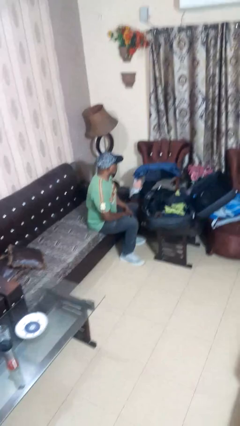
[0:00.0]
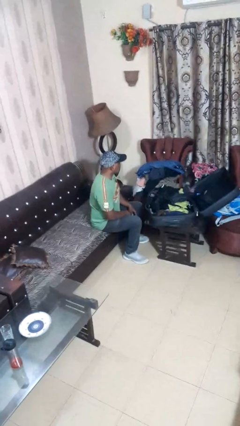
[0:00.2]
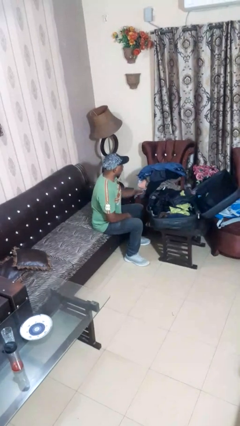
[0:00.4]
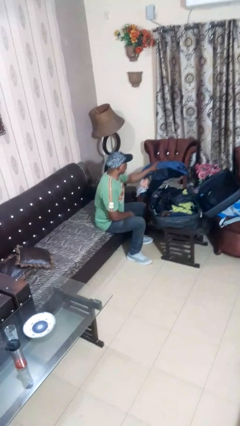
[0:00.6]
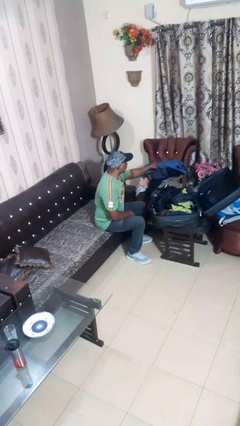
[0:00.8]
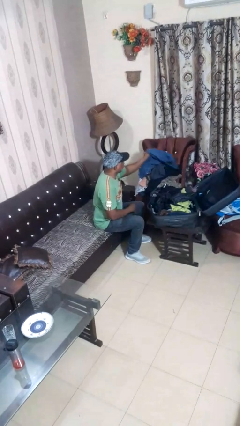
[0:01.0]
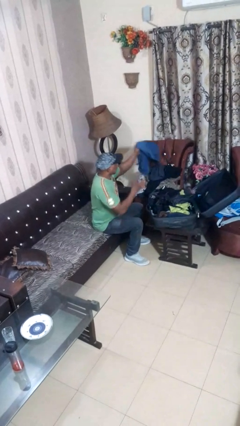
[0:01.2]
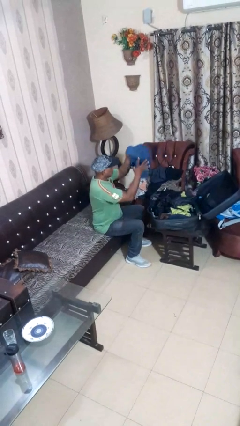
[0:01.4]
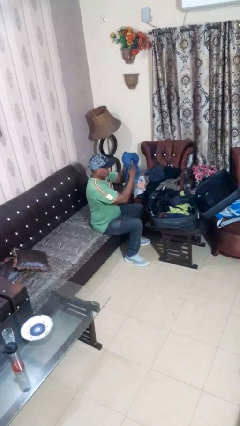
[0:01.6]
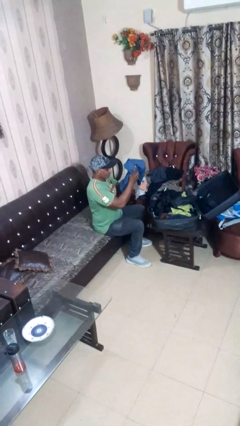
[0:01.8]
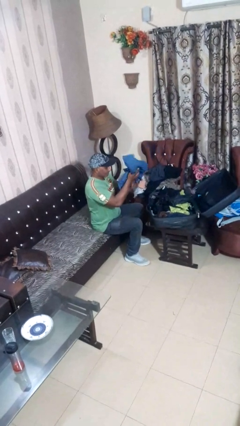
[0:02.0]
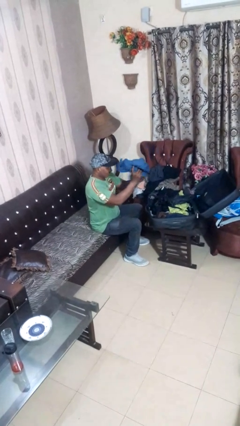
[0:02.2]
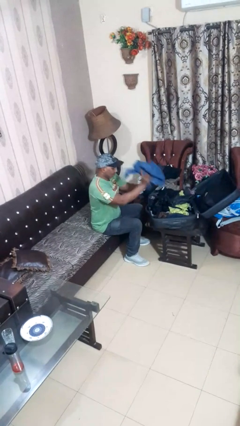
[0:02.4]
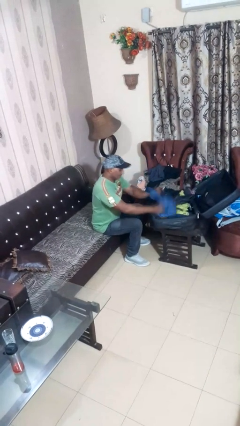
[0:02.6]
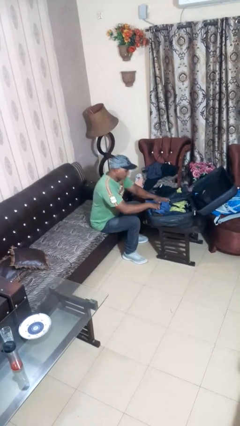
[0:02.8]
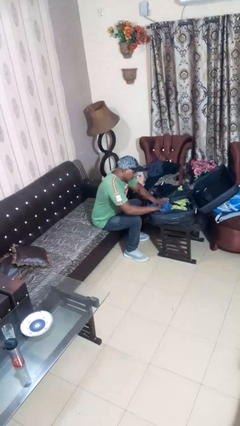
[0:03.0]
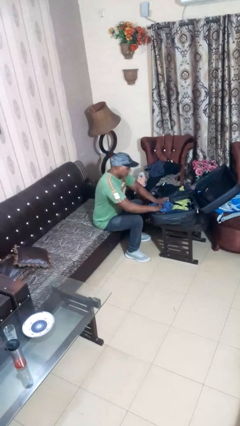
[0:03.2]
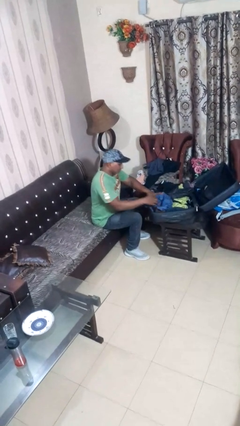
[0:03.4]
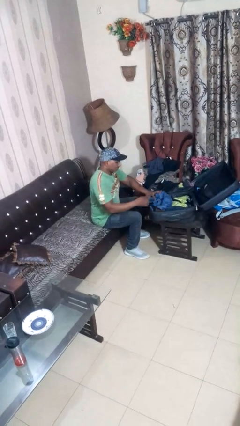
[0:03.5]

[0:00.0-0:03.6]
person loads clothes into suitcase

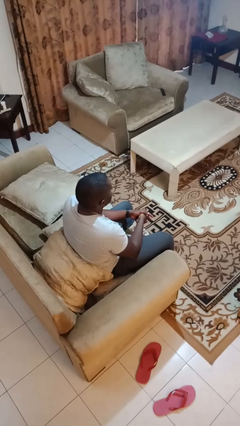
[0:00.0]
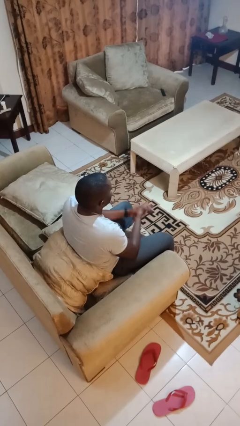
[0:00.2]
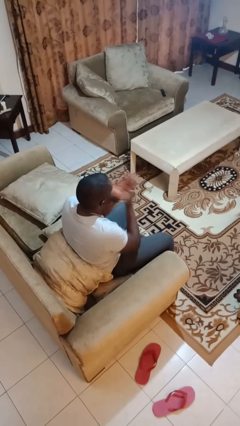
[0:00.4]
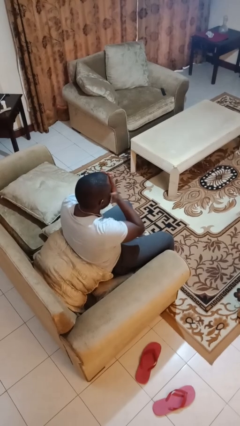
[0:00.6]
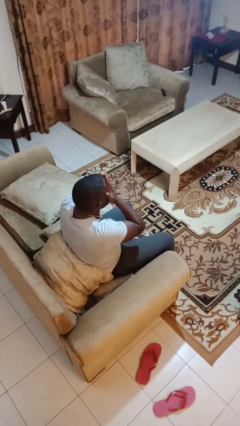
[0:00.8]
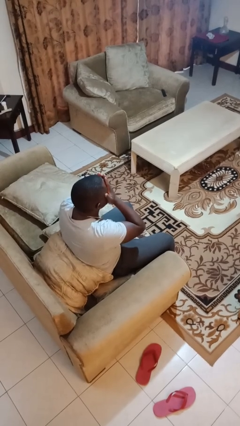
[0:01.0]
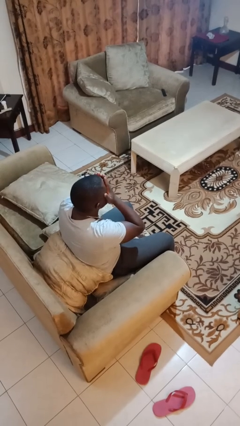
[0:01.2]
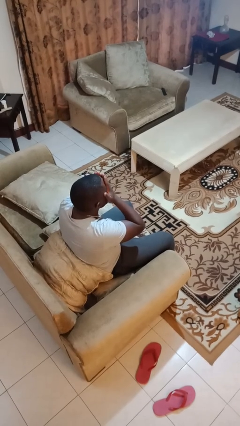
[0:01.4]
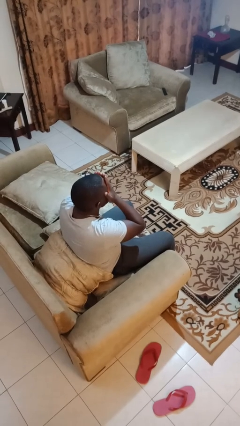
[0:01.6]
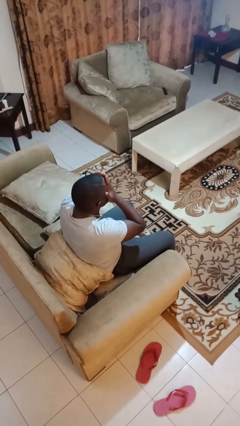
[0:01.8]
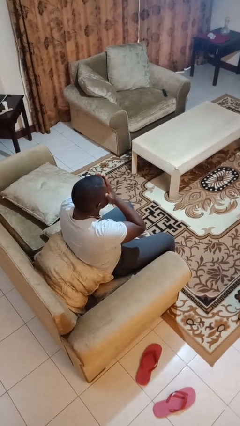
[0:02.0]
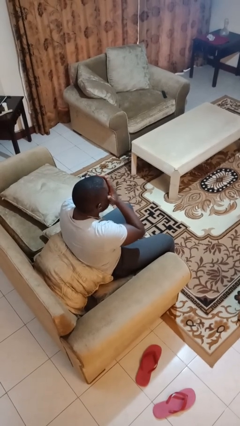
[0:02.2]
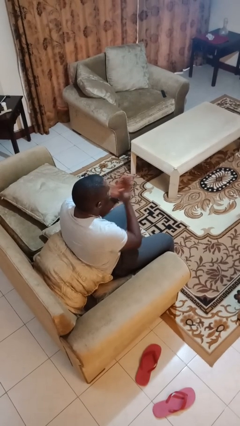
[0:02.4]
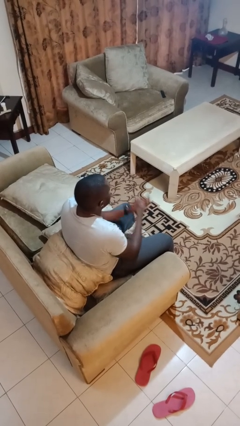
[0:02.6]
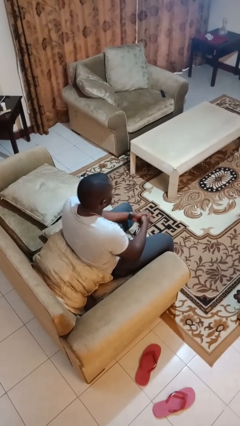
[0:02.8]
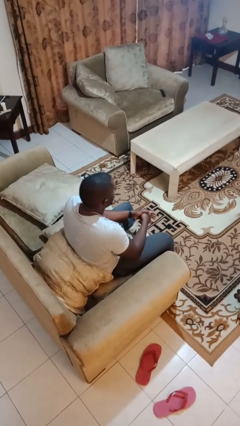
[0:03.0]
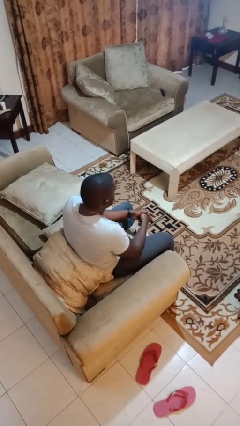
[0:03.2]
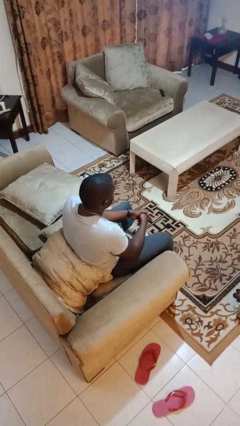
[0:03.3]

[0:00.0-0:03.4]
person covers face with hands

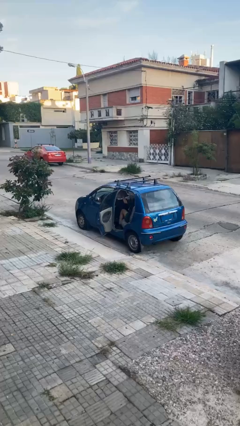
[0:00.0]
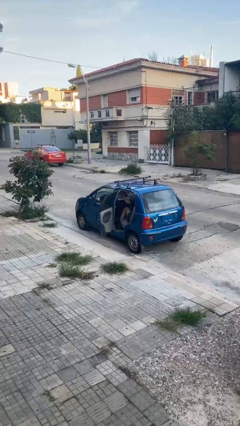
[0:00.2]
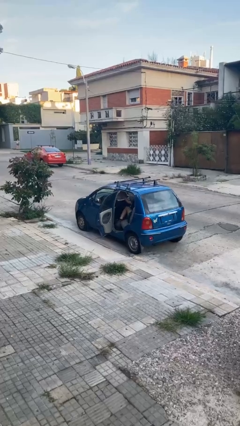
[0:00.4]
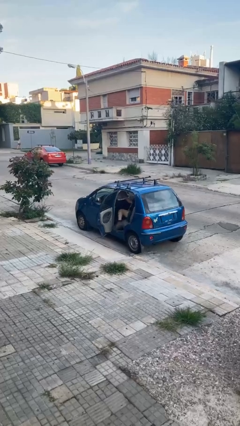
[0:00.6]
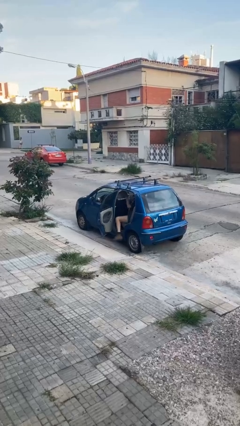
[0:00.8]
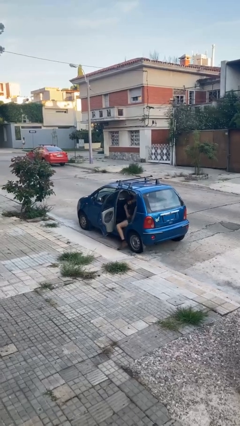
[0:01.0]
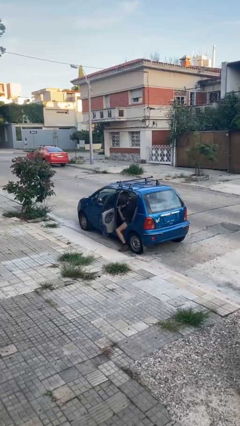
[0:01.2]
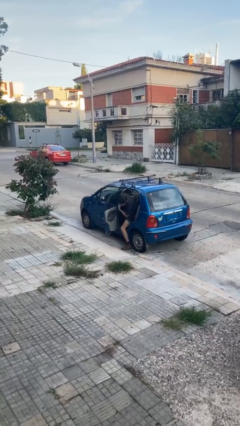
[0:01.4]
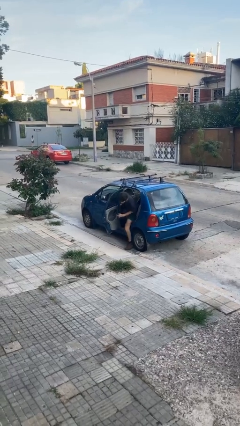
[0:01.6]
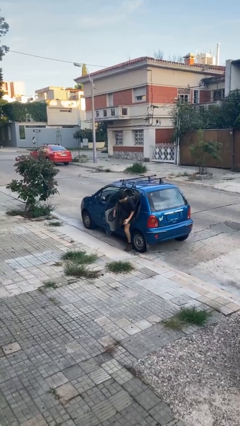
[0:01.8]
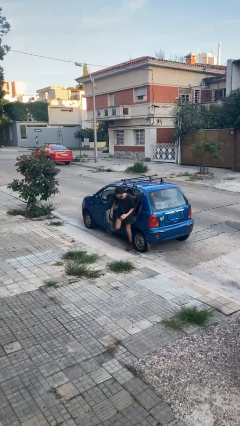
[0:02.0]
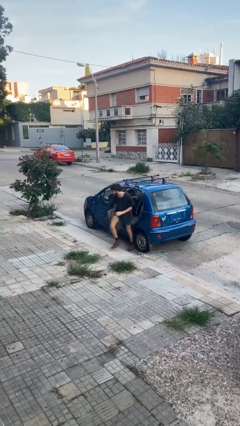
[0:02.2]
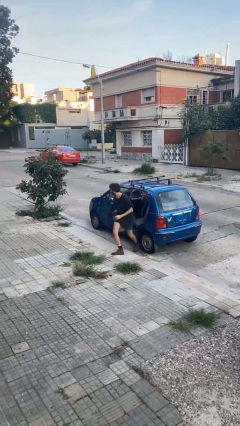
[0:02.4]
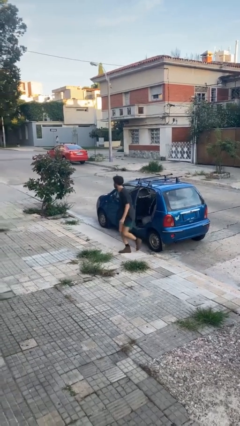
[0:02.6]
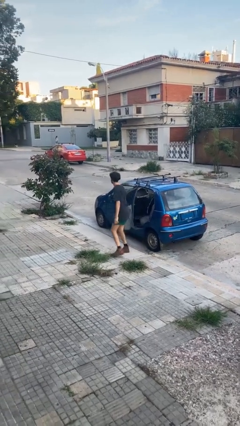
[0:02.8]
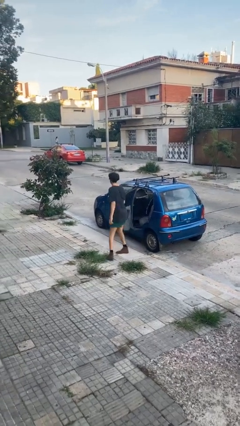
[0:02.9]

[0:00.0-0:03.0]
person exits car

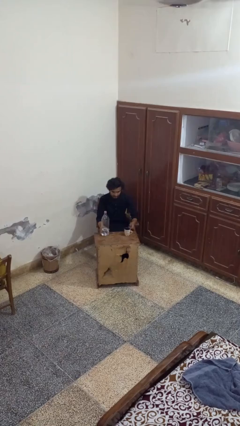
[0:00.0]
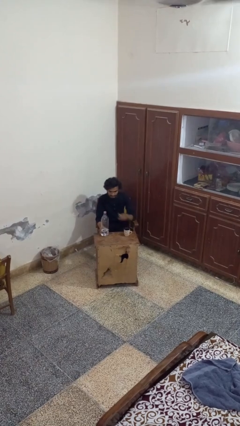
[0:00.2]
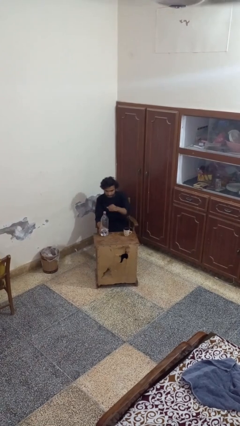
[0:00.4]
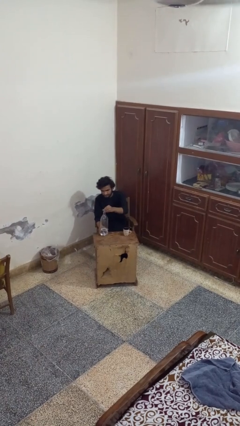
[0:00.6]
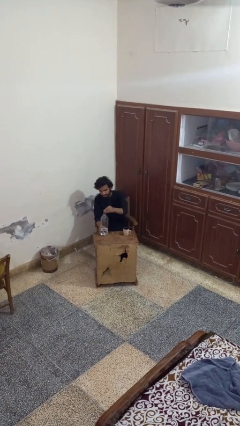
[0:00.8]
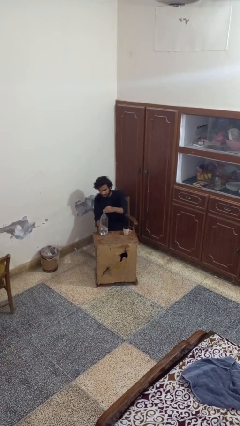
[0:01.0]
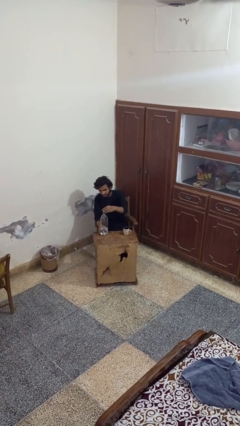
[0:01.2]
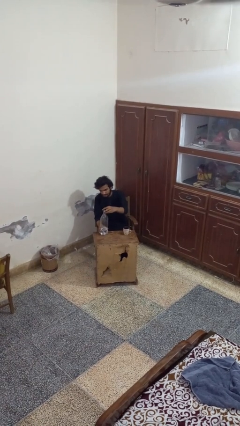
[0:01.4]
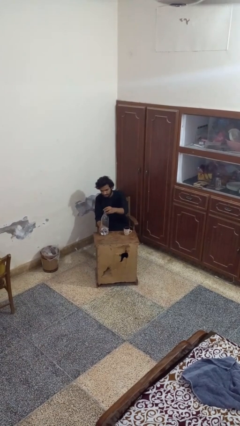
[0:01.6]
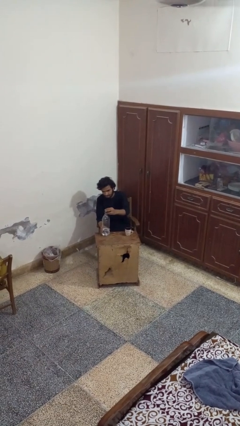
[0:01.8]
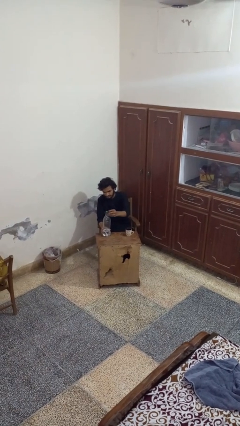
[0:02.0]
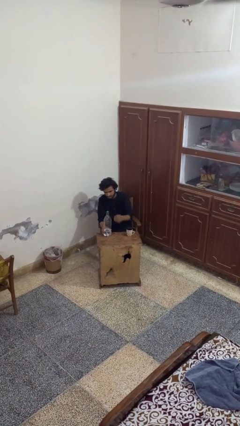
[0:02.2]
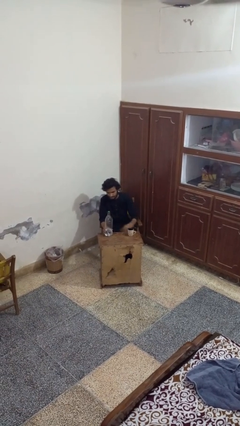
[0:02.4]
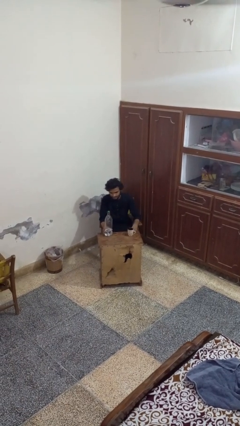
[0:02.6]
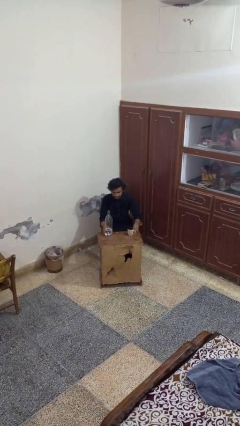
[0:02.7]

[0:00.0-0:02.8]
person screws lid to bottle

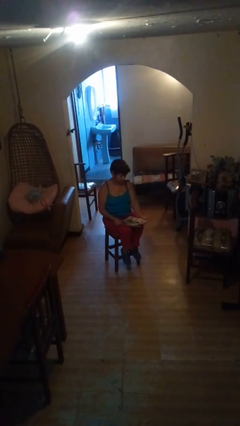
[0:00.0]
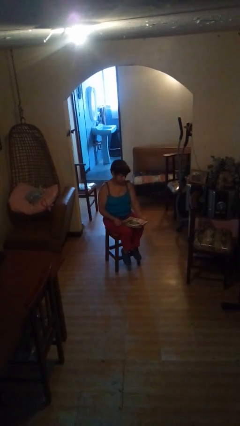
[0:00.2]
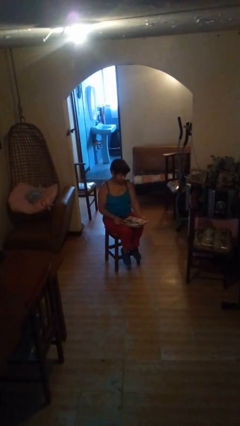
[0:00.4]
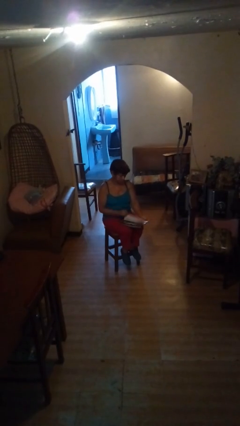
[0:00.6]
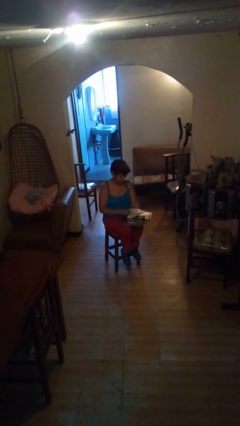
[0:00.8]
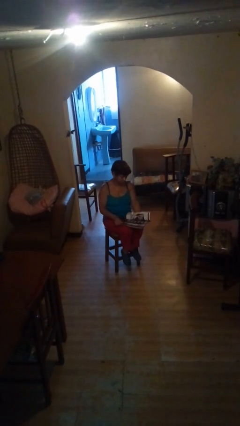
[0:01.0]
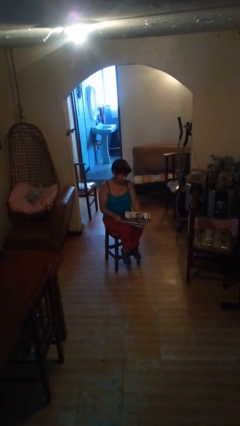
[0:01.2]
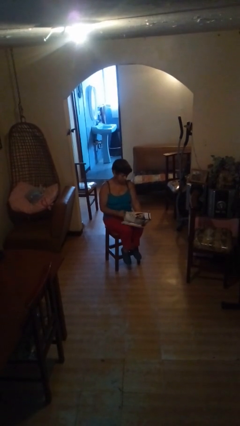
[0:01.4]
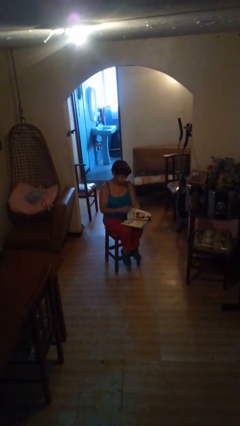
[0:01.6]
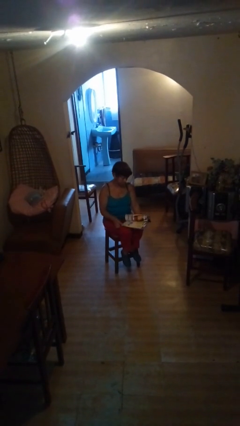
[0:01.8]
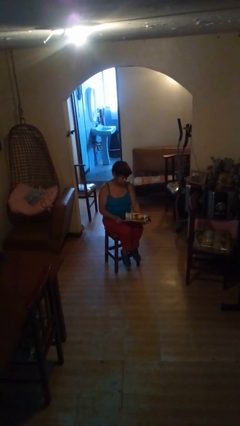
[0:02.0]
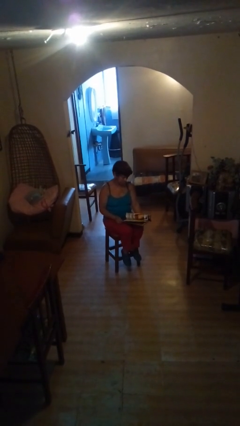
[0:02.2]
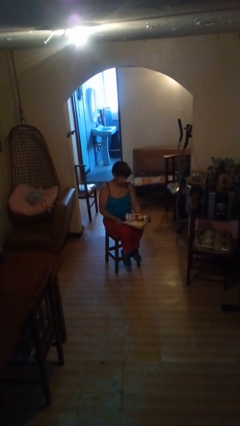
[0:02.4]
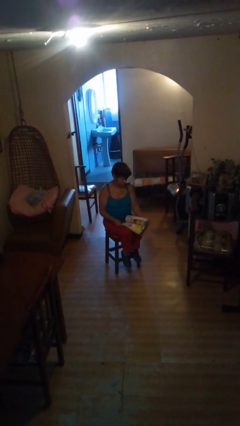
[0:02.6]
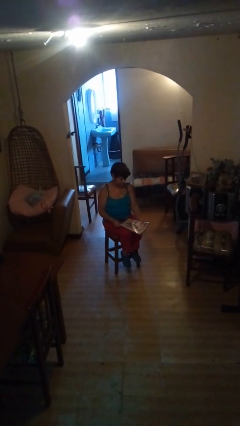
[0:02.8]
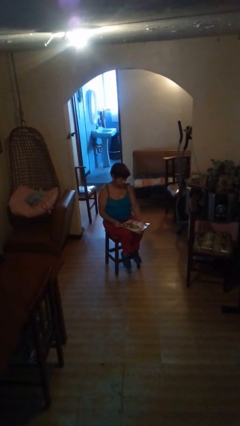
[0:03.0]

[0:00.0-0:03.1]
person reads magazine

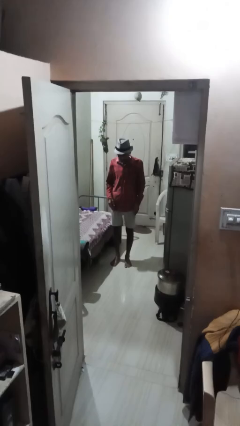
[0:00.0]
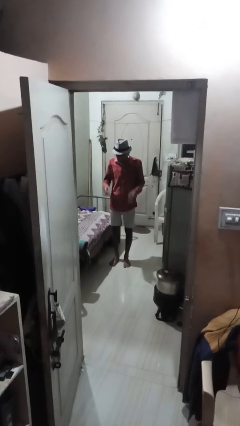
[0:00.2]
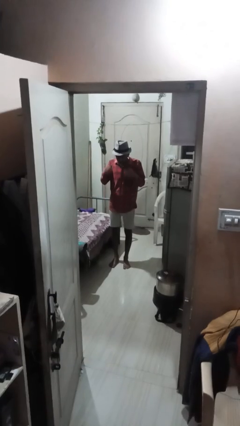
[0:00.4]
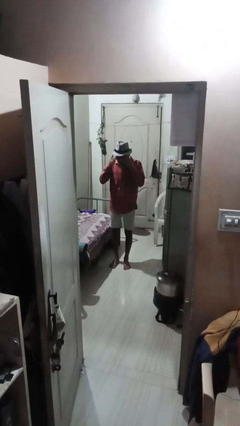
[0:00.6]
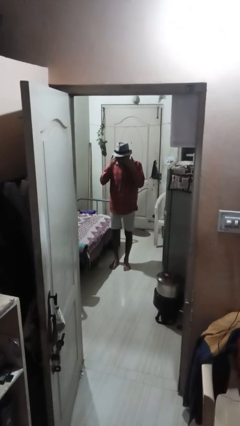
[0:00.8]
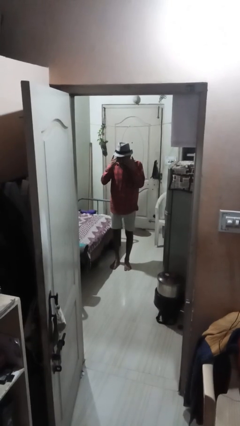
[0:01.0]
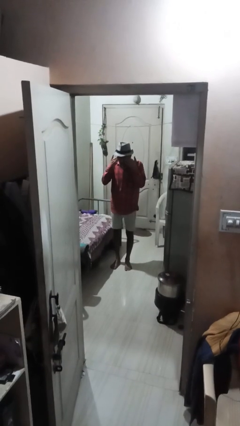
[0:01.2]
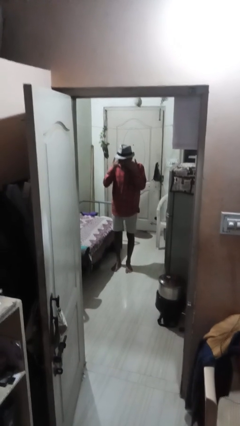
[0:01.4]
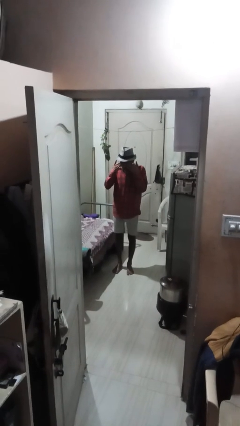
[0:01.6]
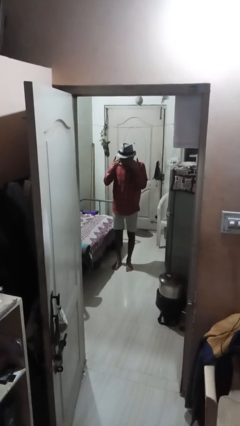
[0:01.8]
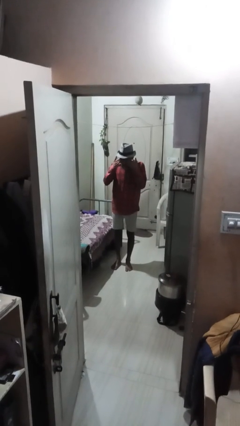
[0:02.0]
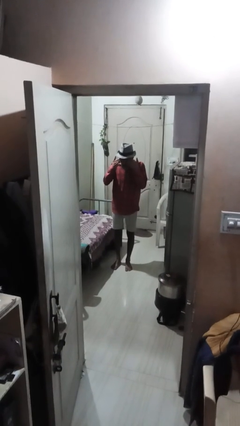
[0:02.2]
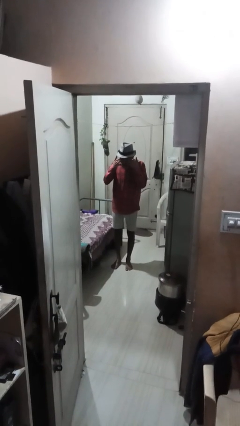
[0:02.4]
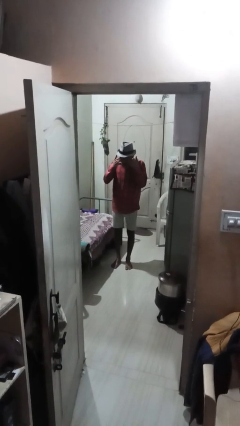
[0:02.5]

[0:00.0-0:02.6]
person rubs eyes
